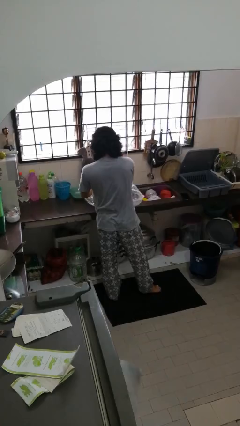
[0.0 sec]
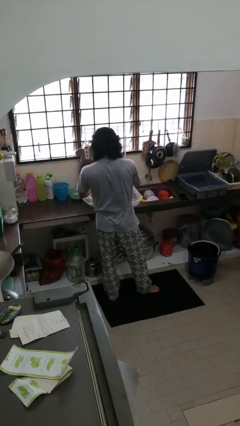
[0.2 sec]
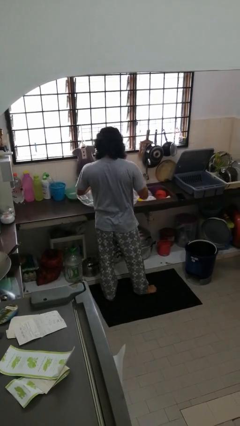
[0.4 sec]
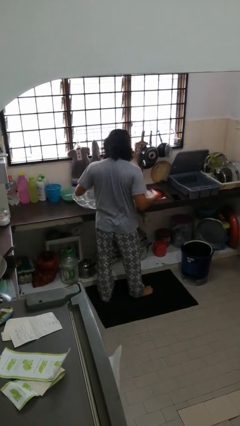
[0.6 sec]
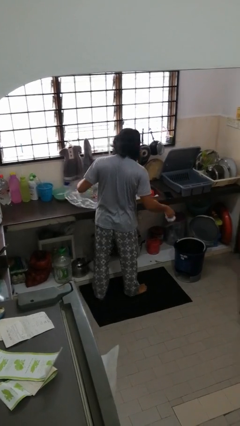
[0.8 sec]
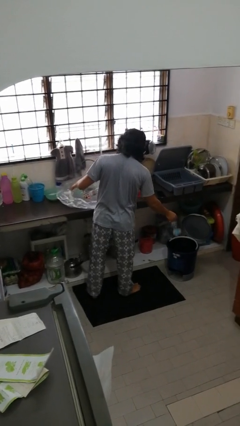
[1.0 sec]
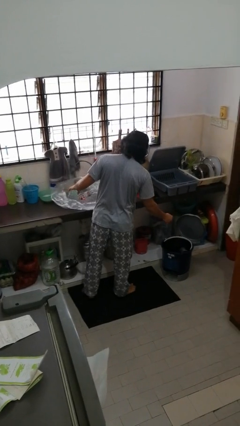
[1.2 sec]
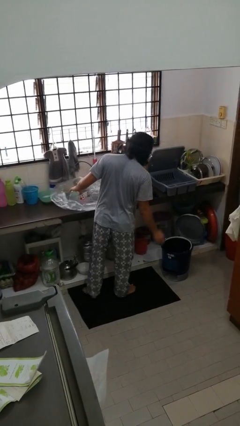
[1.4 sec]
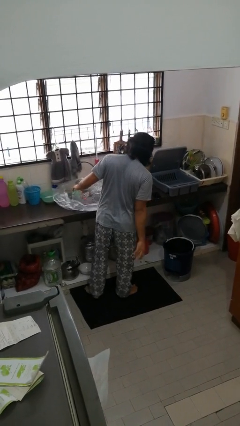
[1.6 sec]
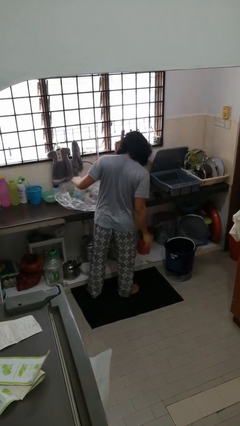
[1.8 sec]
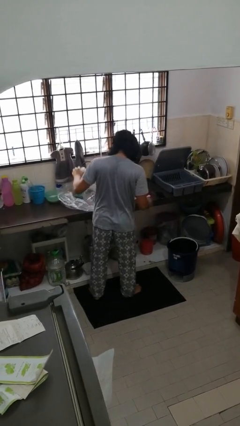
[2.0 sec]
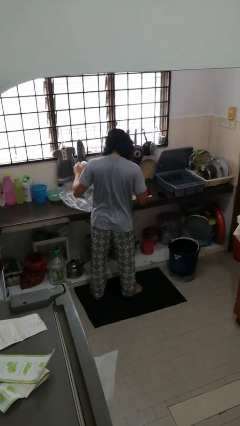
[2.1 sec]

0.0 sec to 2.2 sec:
person discards trash

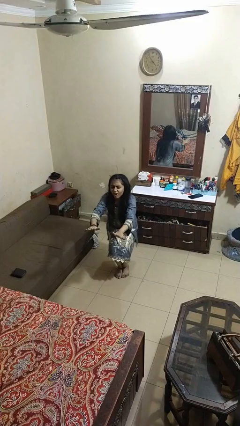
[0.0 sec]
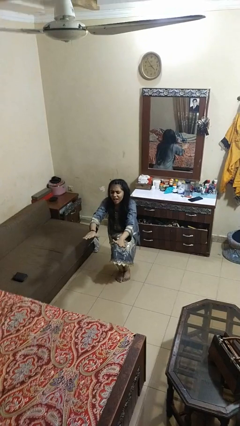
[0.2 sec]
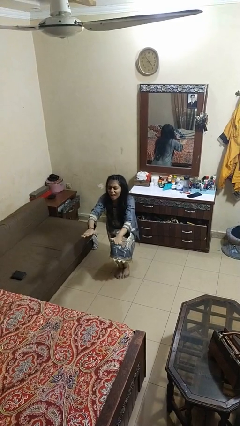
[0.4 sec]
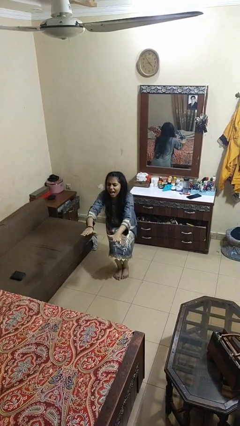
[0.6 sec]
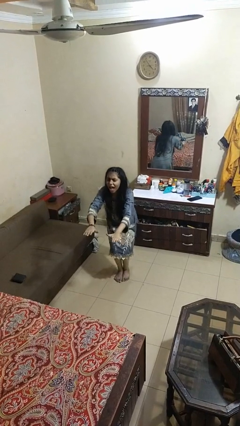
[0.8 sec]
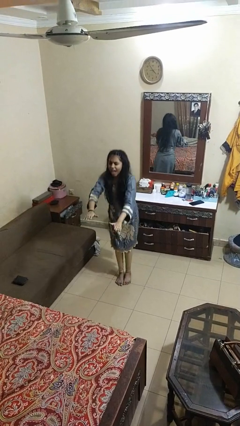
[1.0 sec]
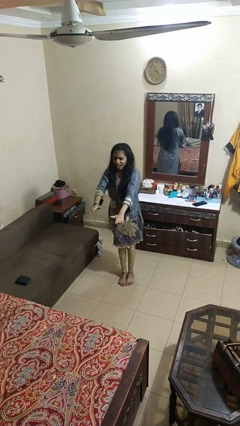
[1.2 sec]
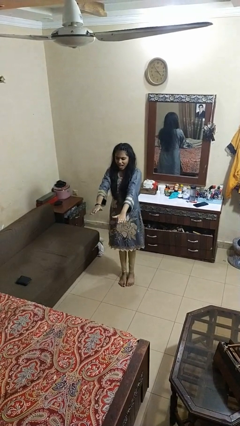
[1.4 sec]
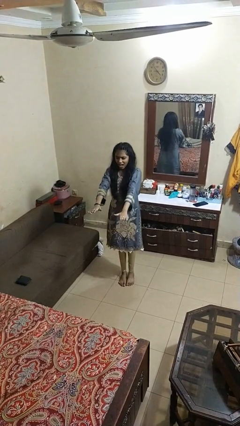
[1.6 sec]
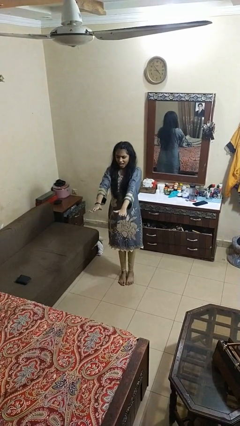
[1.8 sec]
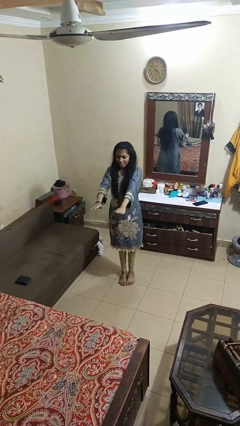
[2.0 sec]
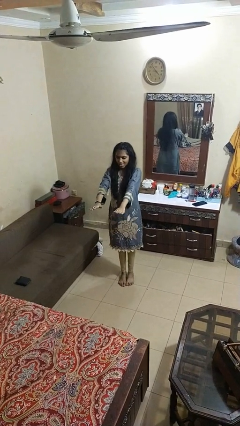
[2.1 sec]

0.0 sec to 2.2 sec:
person stands up

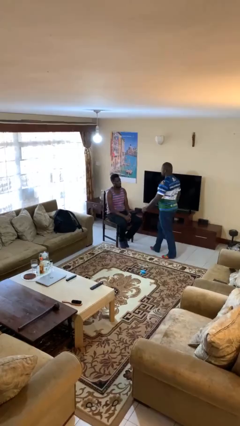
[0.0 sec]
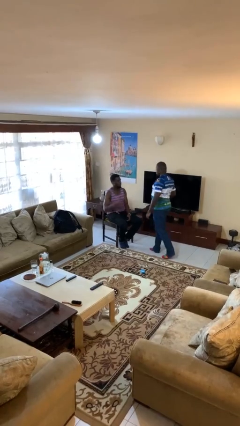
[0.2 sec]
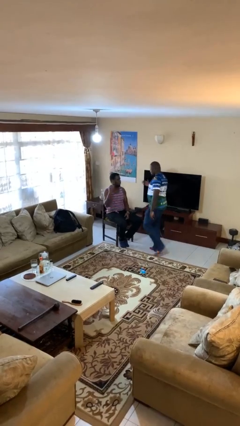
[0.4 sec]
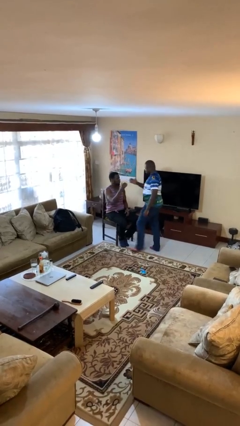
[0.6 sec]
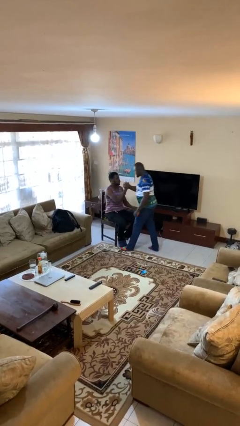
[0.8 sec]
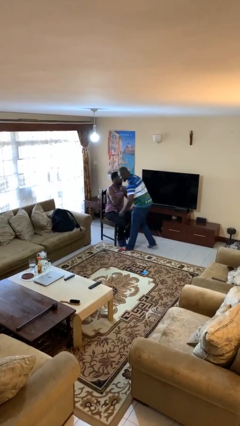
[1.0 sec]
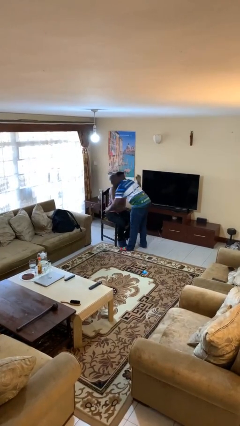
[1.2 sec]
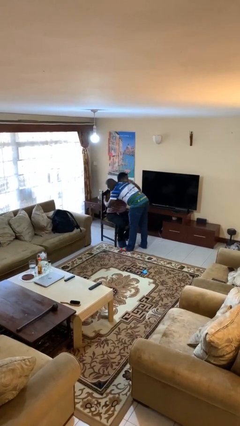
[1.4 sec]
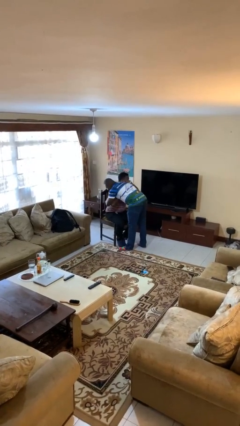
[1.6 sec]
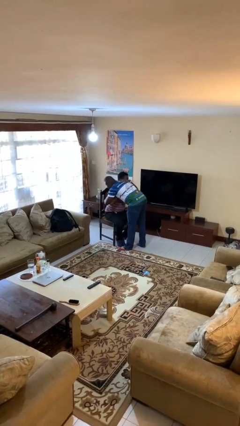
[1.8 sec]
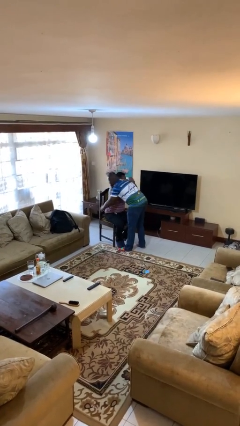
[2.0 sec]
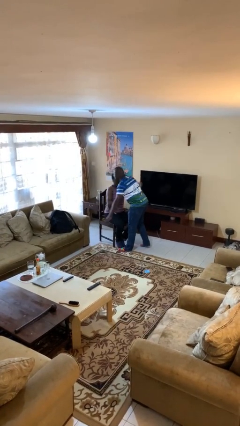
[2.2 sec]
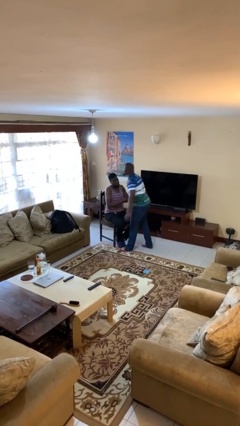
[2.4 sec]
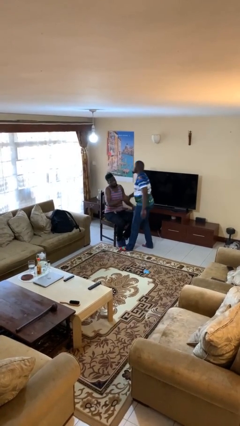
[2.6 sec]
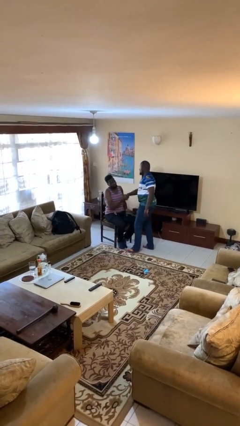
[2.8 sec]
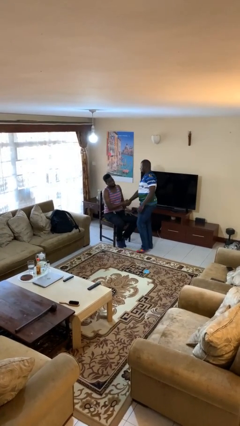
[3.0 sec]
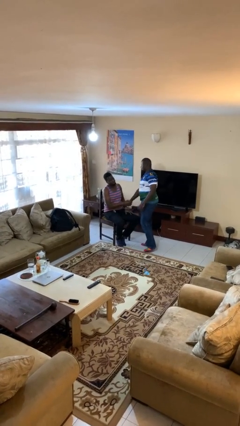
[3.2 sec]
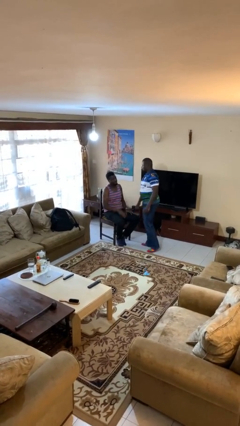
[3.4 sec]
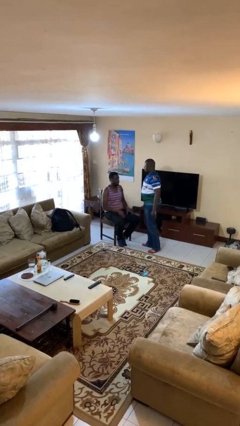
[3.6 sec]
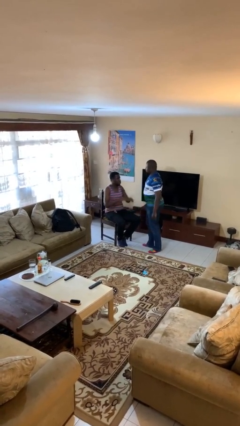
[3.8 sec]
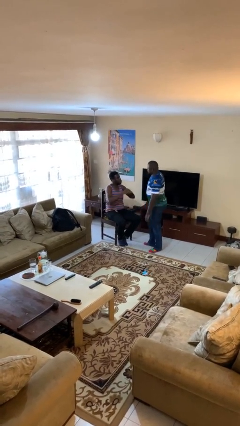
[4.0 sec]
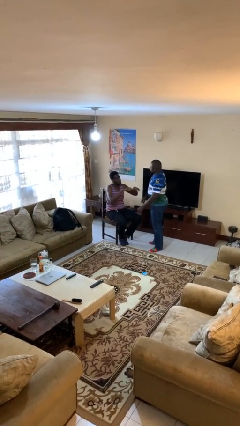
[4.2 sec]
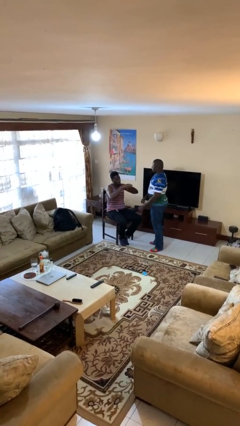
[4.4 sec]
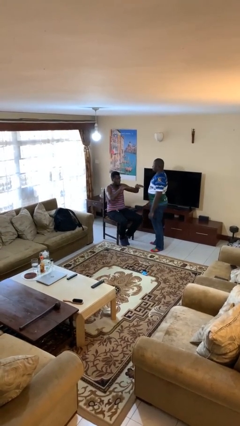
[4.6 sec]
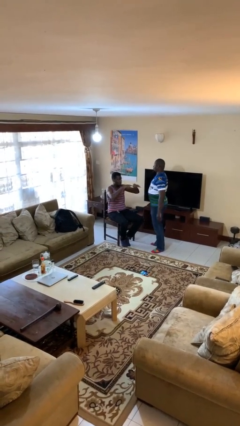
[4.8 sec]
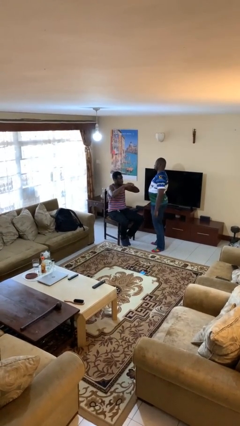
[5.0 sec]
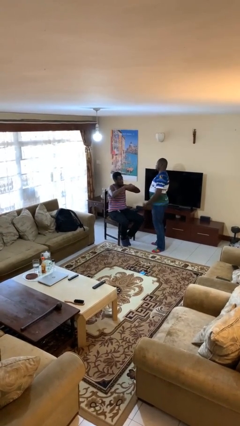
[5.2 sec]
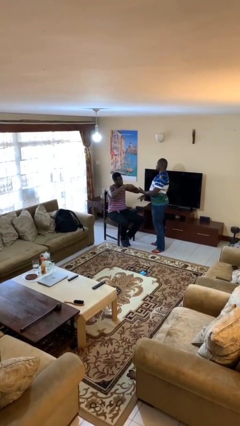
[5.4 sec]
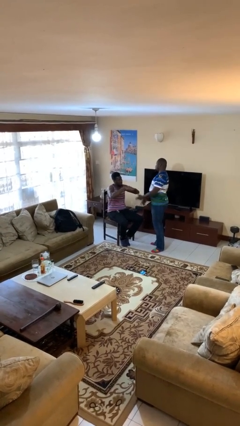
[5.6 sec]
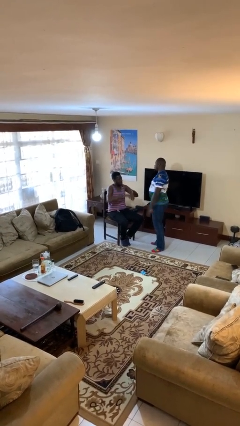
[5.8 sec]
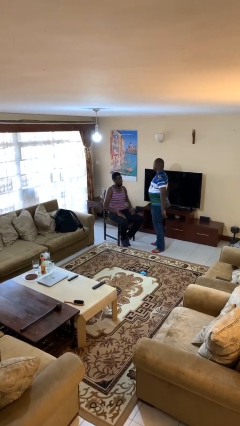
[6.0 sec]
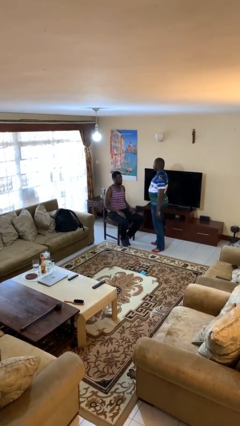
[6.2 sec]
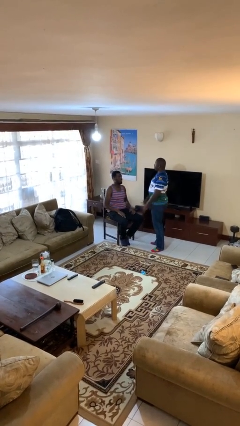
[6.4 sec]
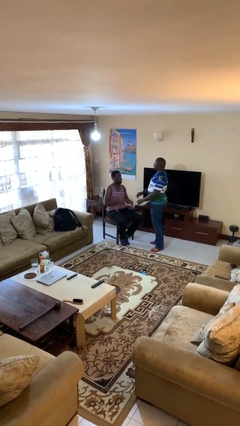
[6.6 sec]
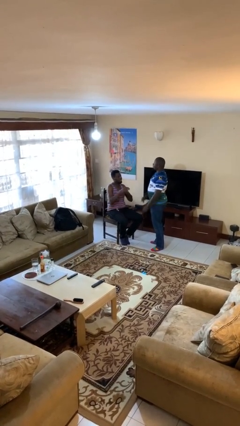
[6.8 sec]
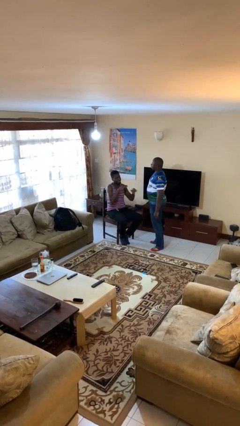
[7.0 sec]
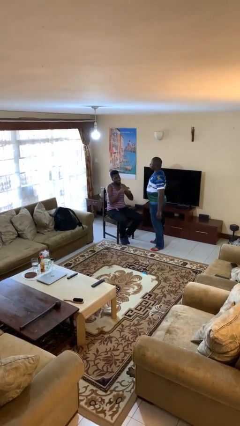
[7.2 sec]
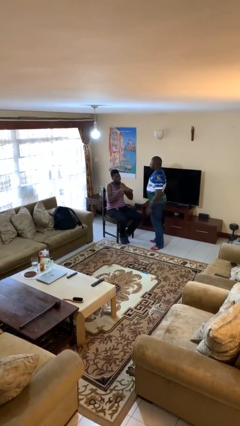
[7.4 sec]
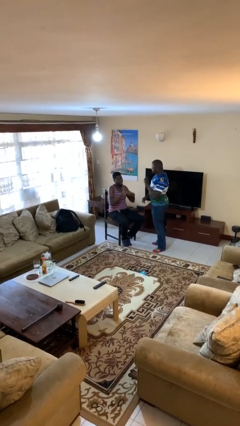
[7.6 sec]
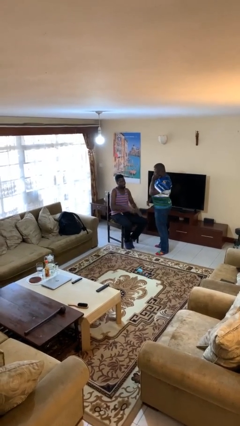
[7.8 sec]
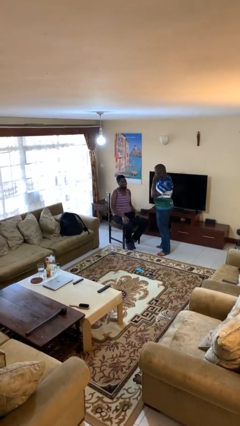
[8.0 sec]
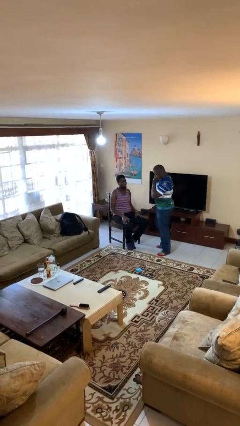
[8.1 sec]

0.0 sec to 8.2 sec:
person embraces person

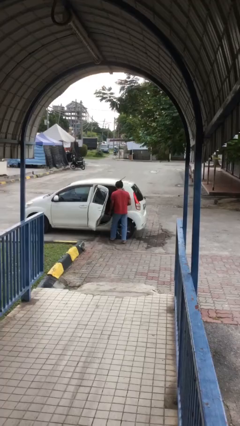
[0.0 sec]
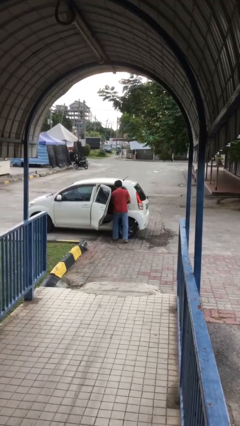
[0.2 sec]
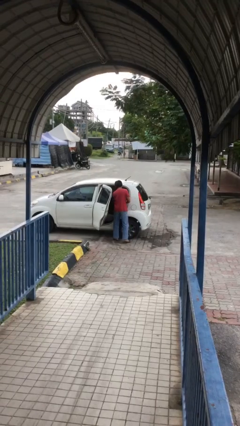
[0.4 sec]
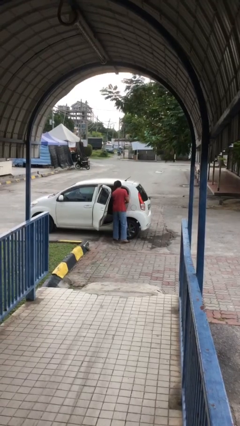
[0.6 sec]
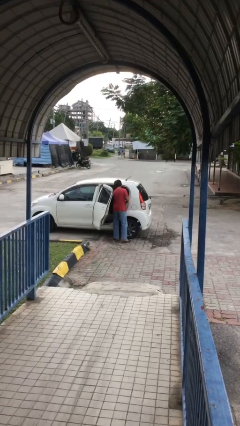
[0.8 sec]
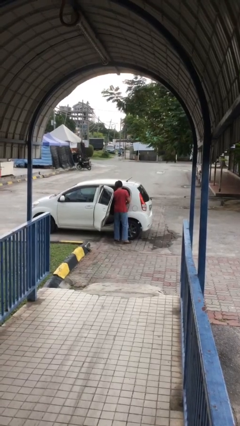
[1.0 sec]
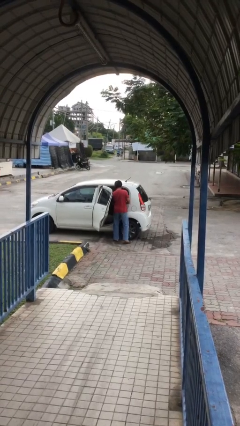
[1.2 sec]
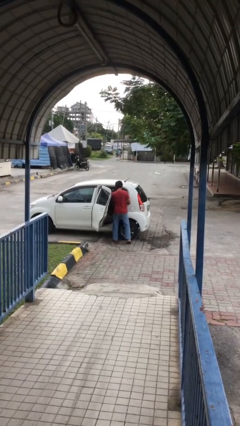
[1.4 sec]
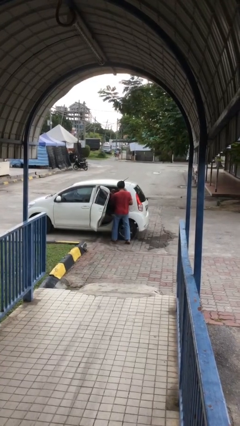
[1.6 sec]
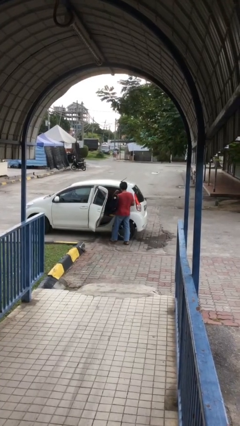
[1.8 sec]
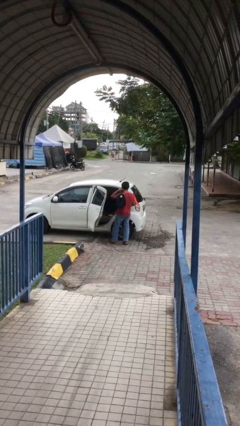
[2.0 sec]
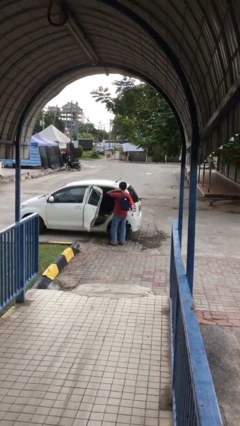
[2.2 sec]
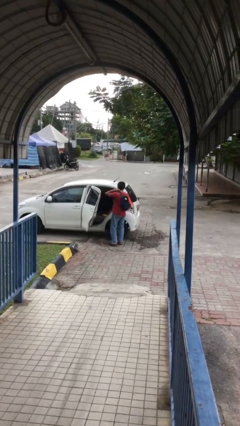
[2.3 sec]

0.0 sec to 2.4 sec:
person unloads car

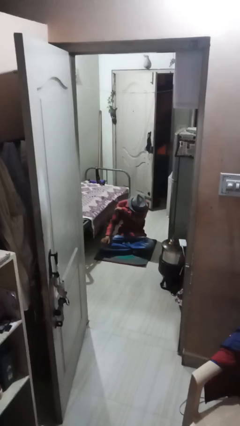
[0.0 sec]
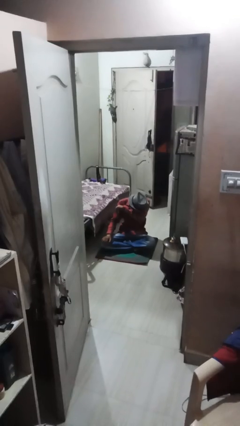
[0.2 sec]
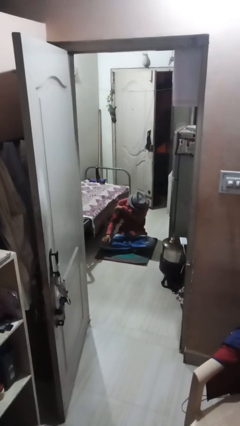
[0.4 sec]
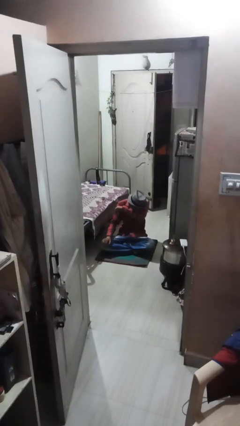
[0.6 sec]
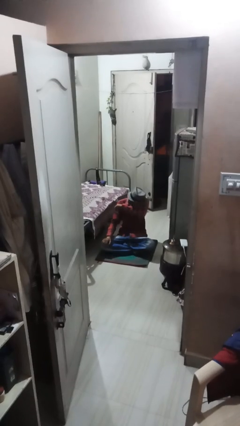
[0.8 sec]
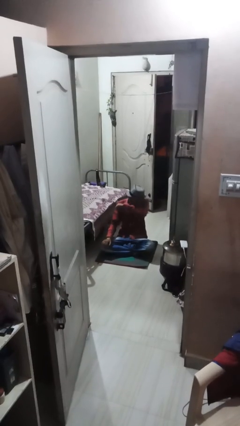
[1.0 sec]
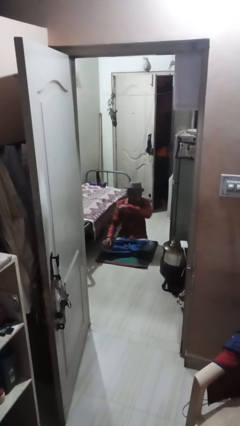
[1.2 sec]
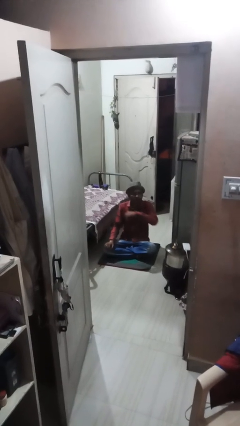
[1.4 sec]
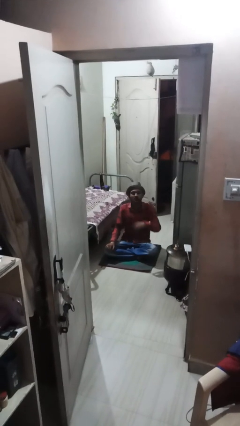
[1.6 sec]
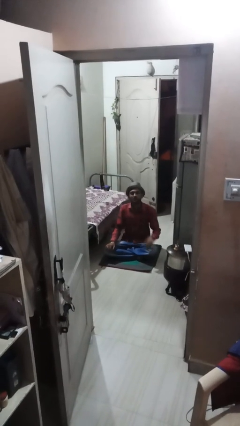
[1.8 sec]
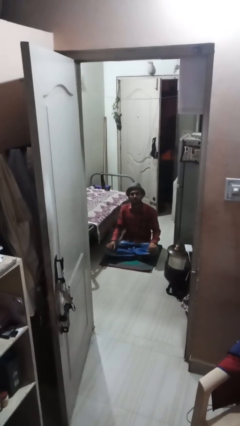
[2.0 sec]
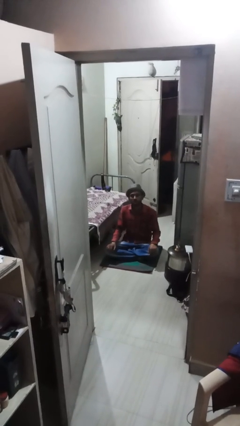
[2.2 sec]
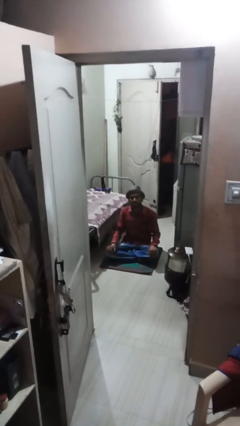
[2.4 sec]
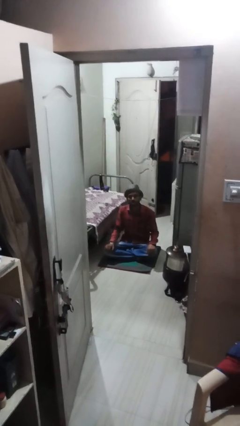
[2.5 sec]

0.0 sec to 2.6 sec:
person sneezes into arm
